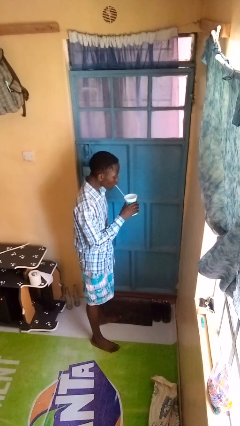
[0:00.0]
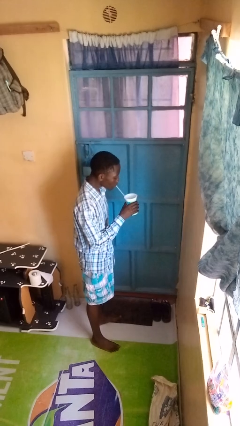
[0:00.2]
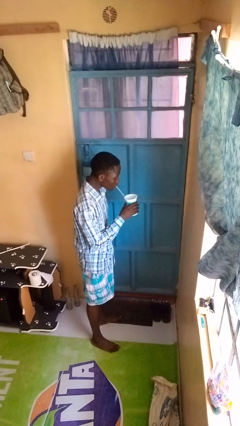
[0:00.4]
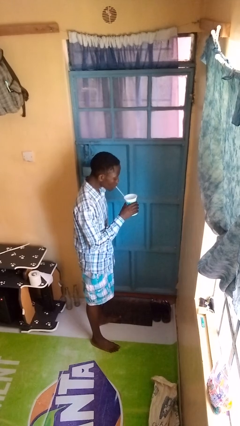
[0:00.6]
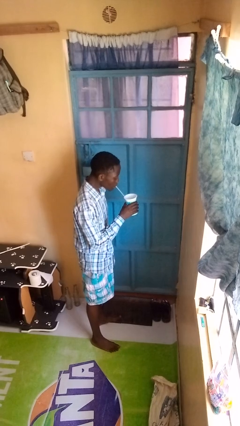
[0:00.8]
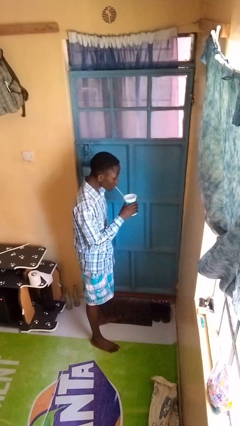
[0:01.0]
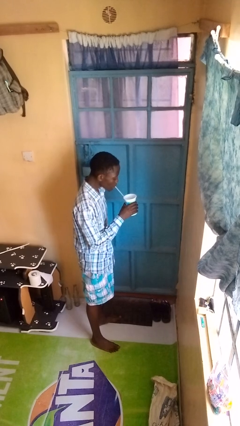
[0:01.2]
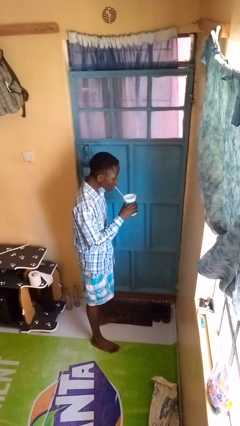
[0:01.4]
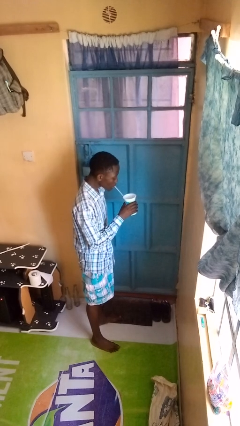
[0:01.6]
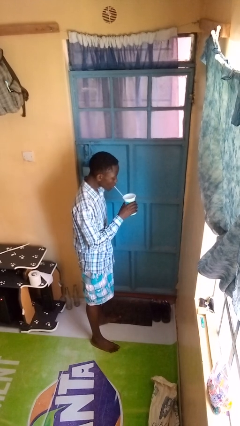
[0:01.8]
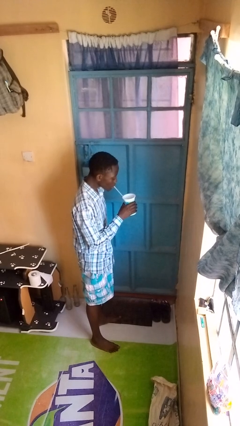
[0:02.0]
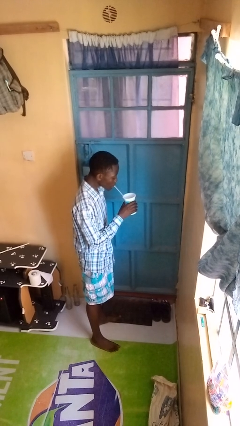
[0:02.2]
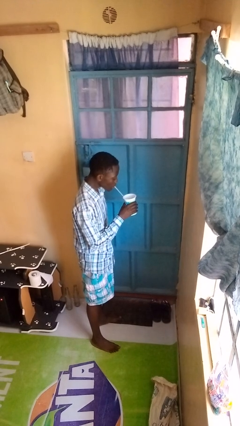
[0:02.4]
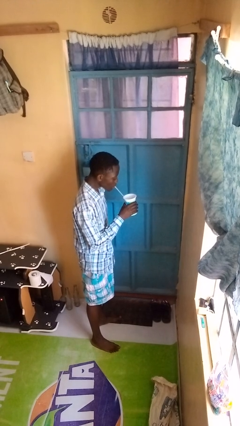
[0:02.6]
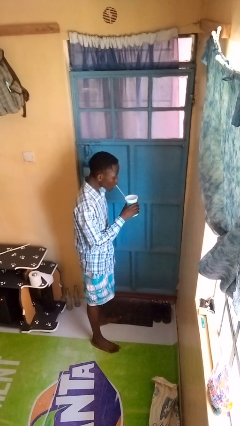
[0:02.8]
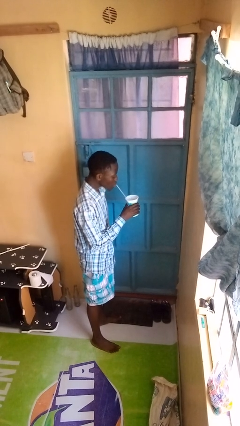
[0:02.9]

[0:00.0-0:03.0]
person drinks from straw

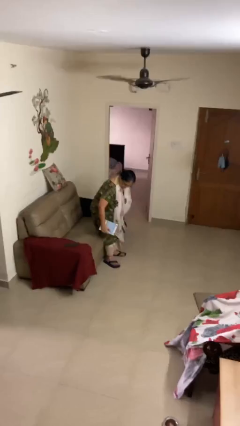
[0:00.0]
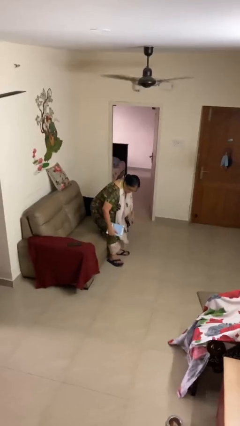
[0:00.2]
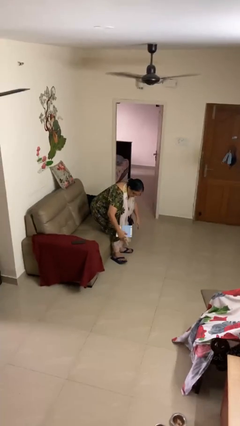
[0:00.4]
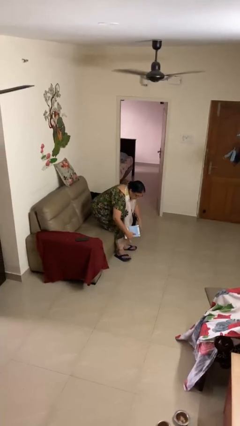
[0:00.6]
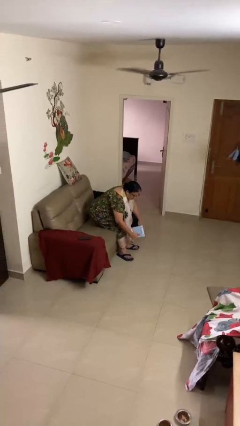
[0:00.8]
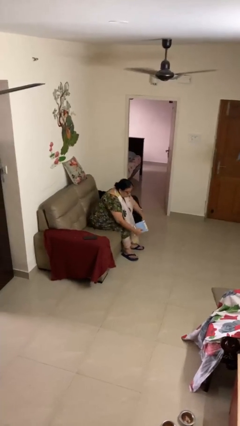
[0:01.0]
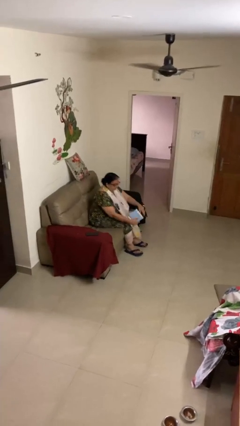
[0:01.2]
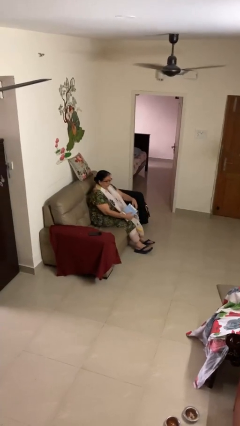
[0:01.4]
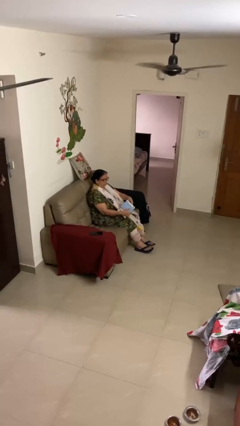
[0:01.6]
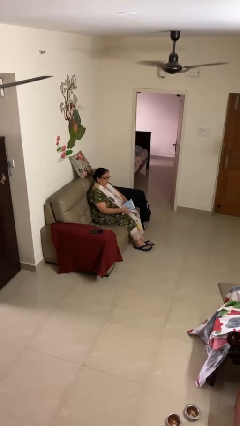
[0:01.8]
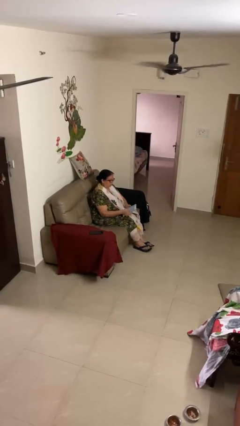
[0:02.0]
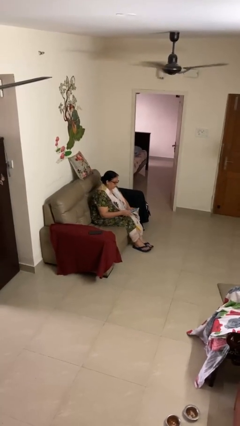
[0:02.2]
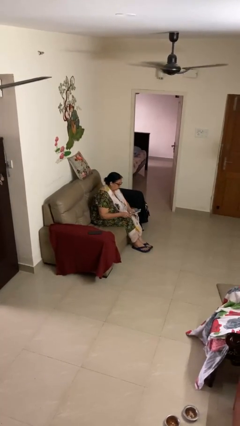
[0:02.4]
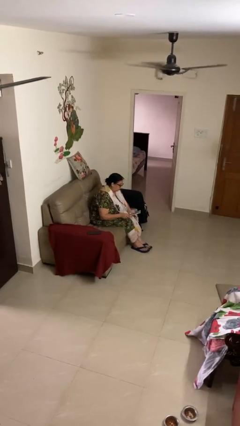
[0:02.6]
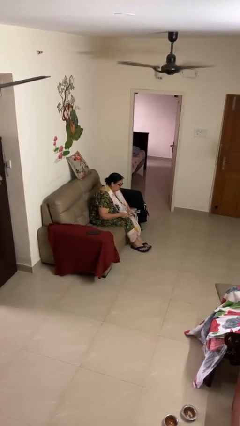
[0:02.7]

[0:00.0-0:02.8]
person sits down

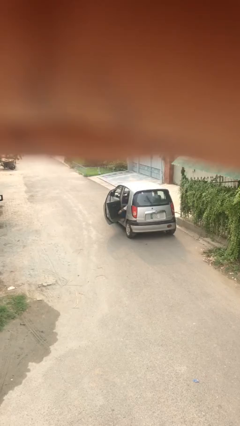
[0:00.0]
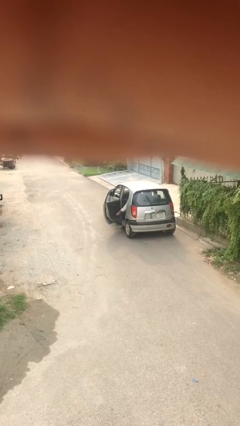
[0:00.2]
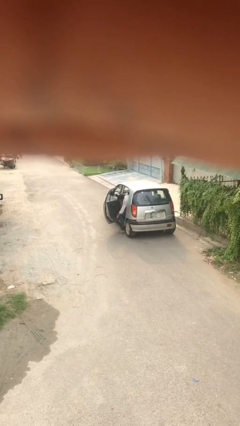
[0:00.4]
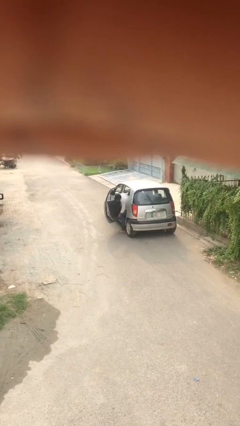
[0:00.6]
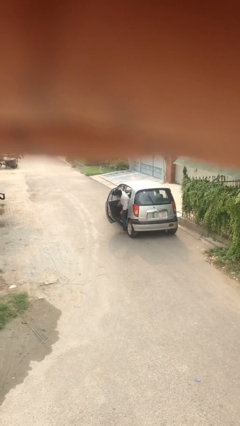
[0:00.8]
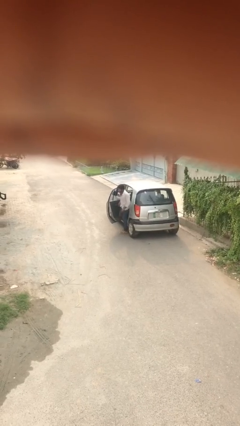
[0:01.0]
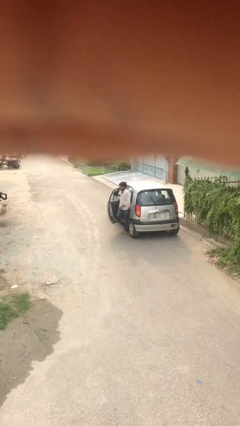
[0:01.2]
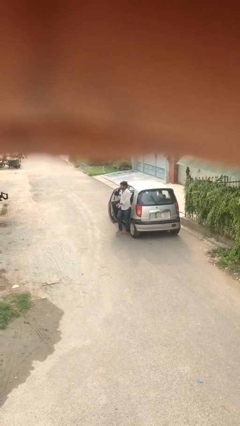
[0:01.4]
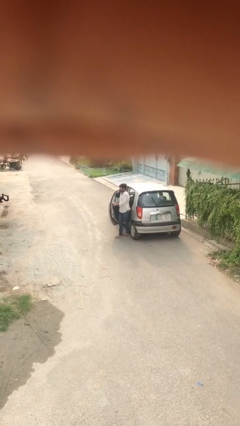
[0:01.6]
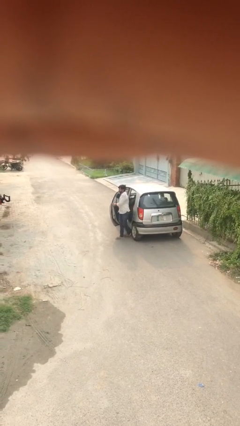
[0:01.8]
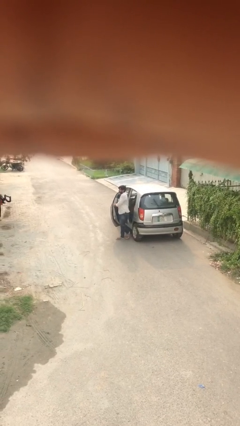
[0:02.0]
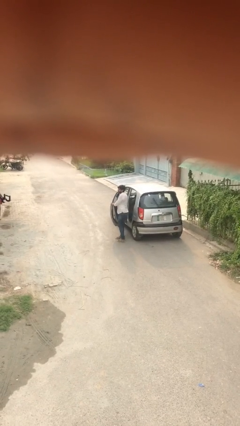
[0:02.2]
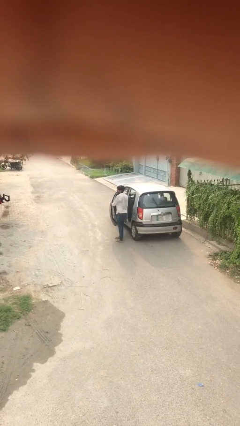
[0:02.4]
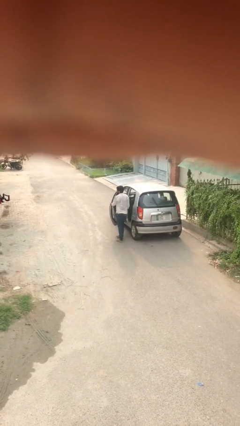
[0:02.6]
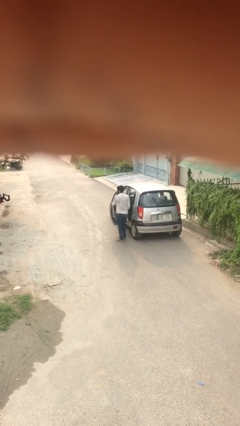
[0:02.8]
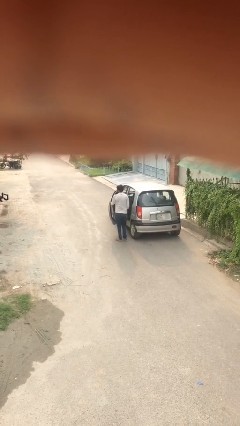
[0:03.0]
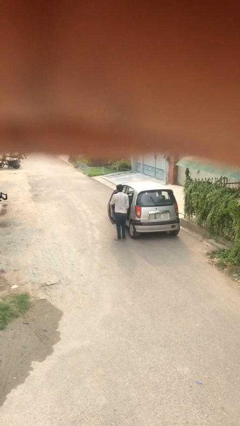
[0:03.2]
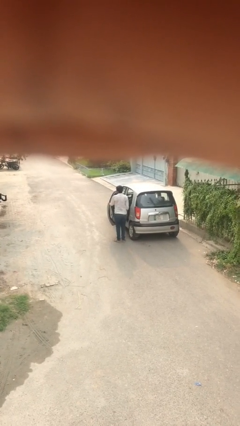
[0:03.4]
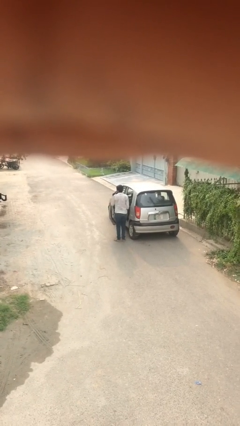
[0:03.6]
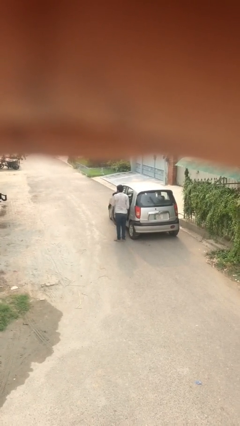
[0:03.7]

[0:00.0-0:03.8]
person exits car

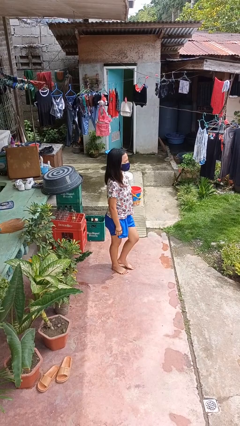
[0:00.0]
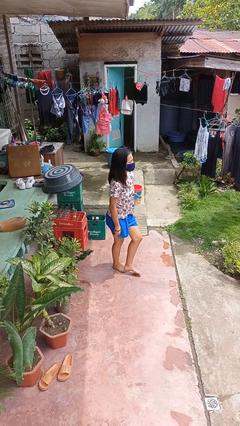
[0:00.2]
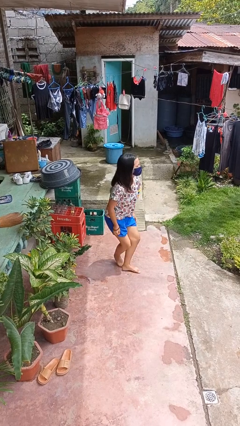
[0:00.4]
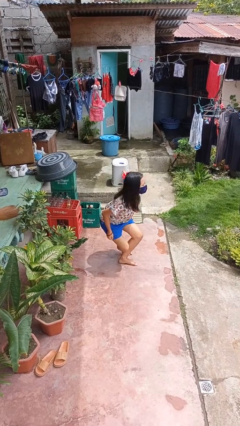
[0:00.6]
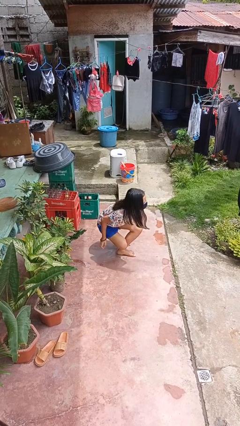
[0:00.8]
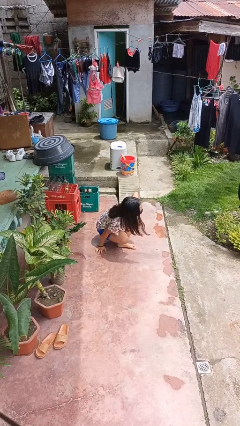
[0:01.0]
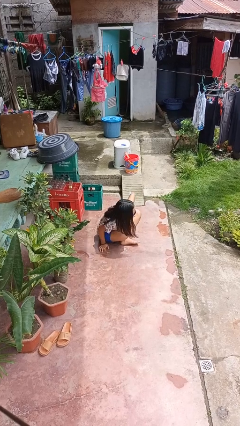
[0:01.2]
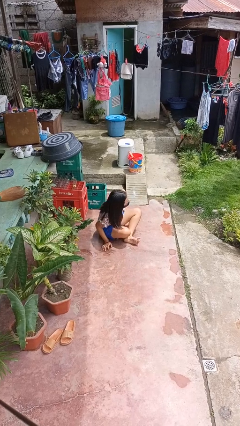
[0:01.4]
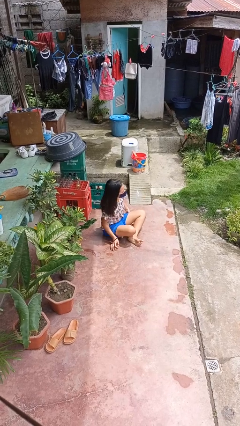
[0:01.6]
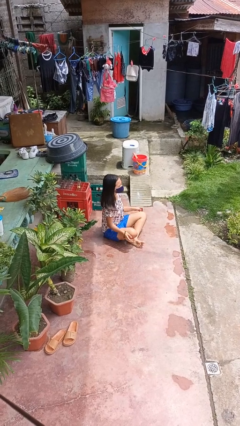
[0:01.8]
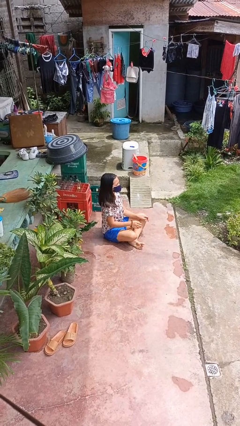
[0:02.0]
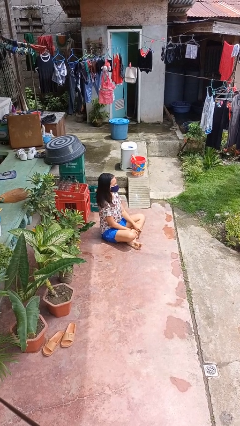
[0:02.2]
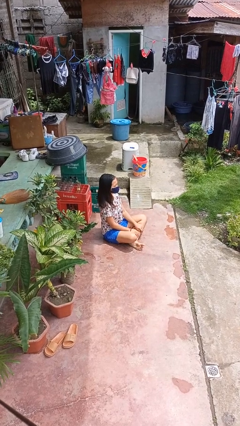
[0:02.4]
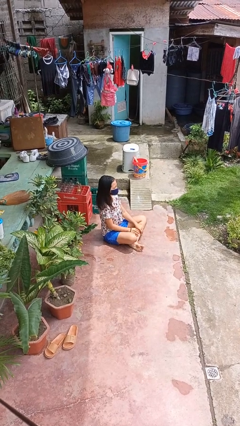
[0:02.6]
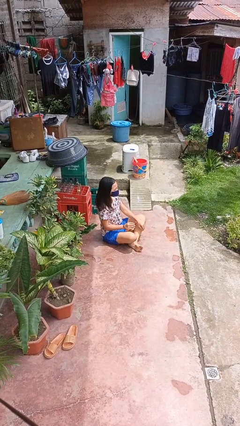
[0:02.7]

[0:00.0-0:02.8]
person sits crisscross

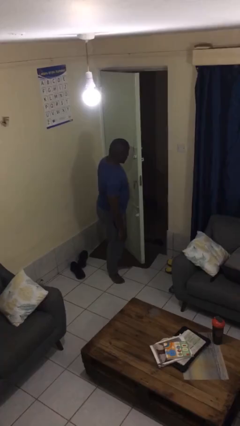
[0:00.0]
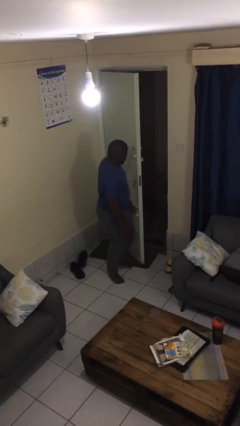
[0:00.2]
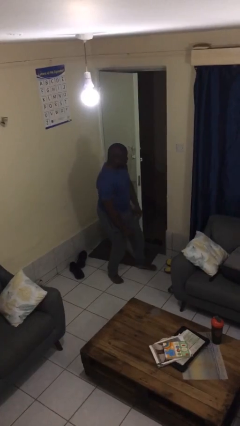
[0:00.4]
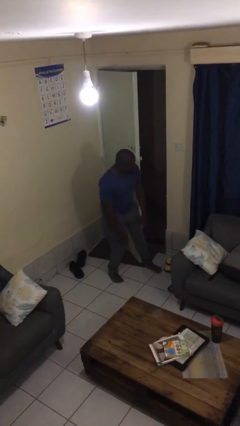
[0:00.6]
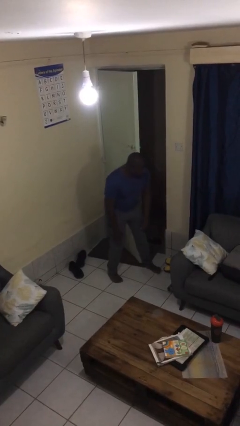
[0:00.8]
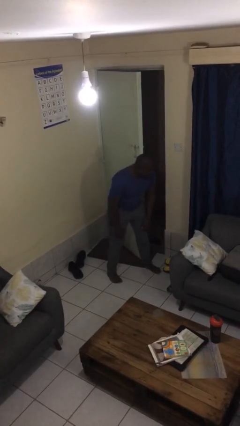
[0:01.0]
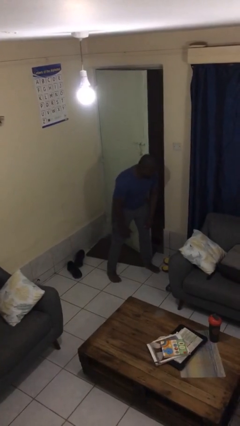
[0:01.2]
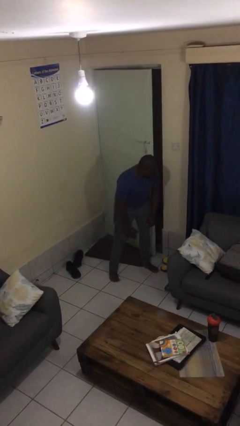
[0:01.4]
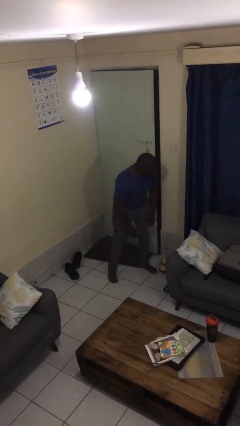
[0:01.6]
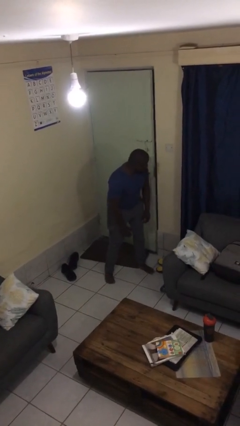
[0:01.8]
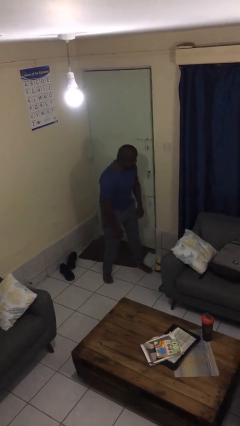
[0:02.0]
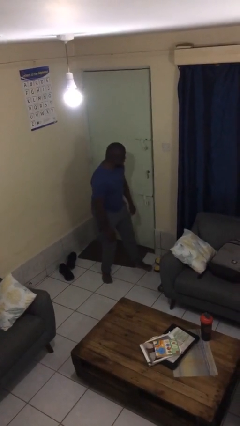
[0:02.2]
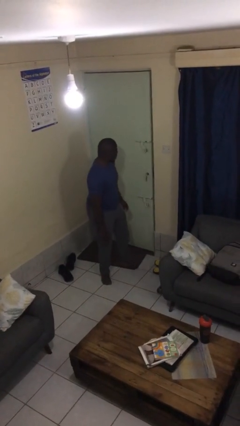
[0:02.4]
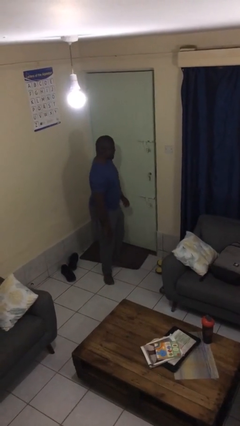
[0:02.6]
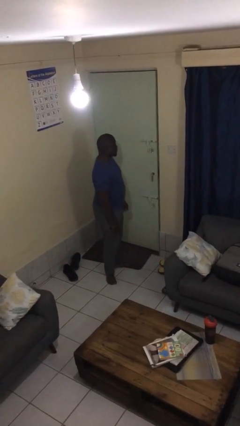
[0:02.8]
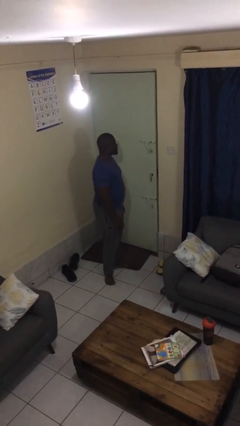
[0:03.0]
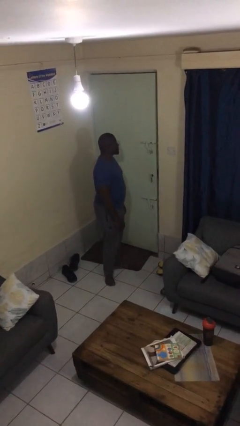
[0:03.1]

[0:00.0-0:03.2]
person closes door with hip

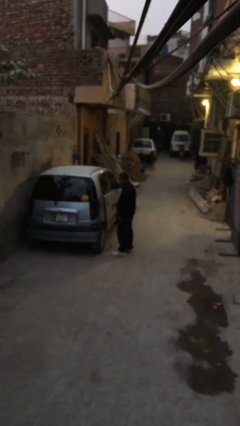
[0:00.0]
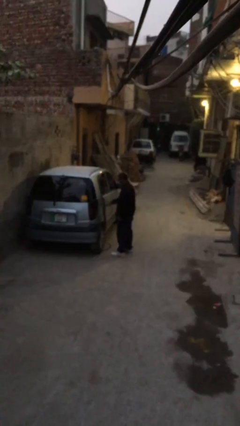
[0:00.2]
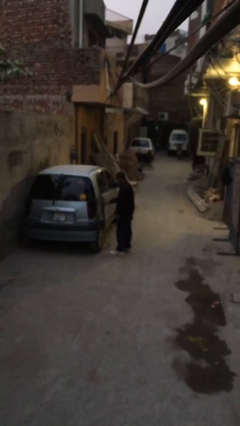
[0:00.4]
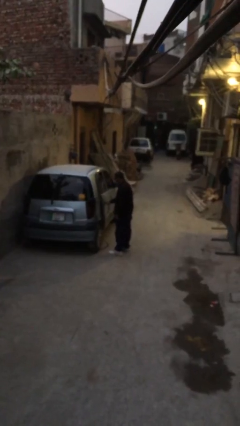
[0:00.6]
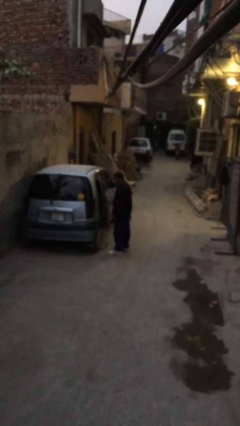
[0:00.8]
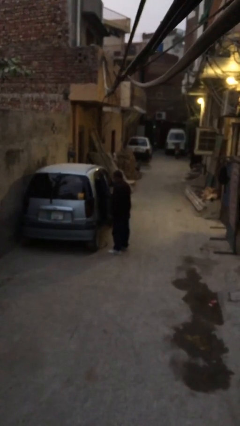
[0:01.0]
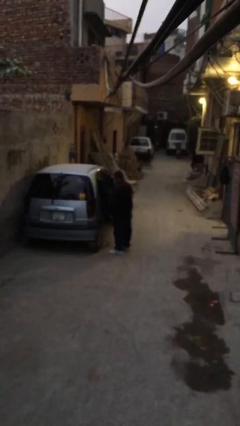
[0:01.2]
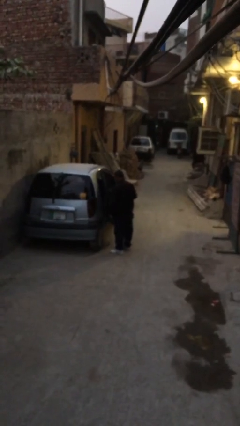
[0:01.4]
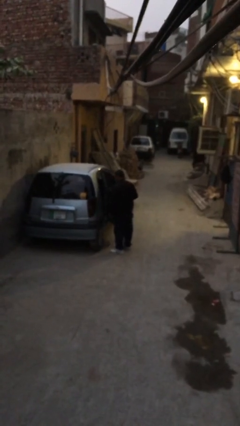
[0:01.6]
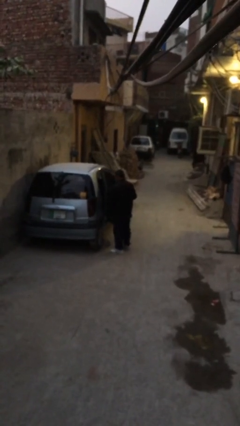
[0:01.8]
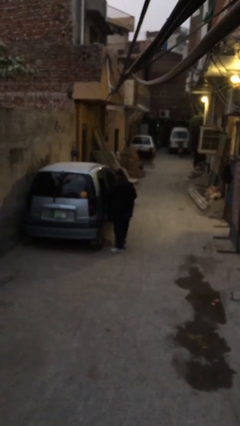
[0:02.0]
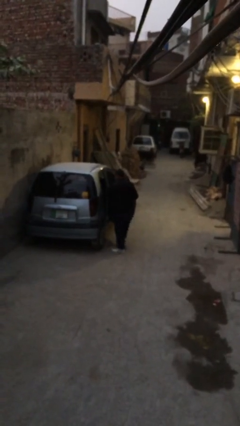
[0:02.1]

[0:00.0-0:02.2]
person opens car door
